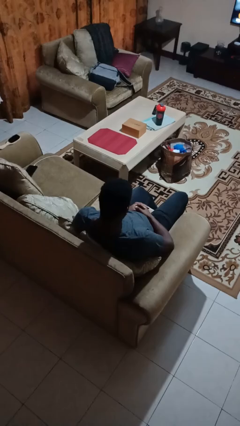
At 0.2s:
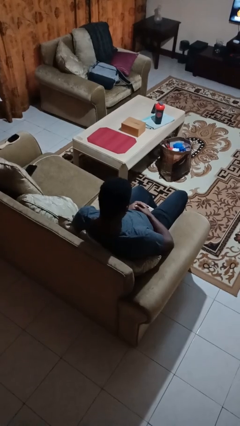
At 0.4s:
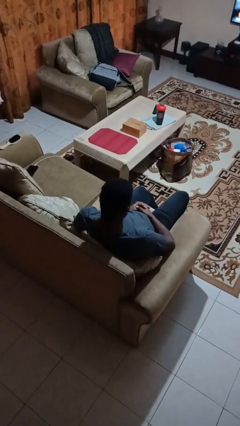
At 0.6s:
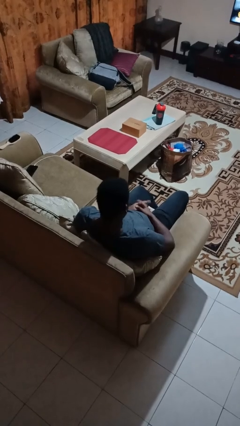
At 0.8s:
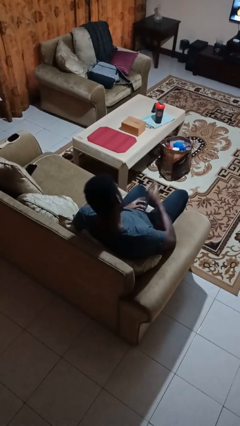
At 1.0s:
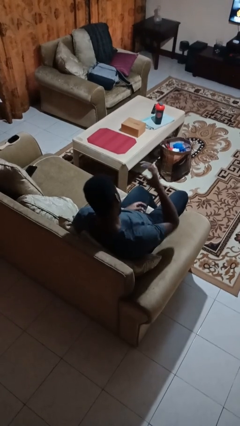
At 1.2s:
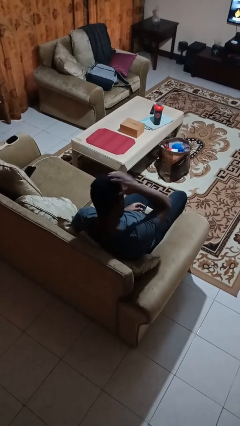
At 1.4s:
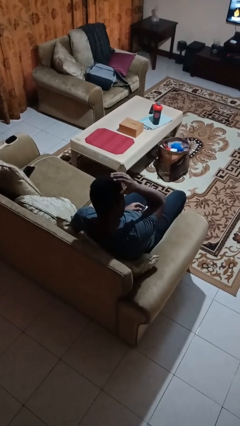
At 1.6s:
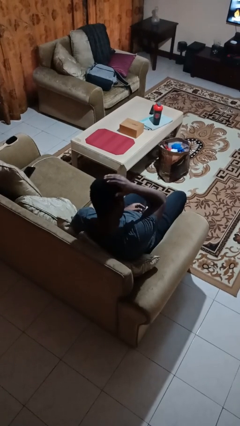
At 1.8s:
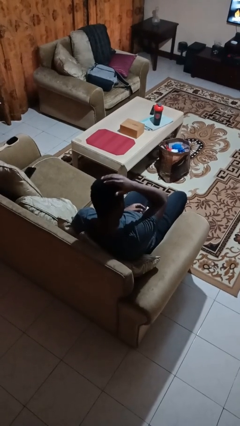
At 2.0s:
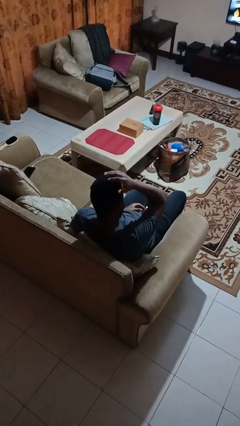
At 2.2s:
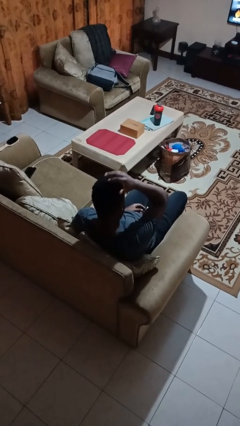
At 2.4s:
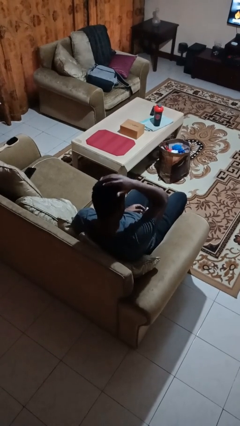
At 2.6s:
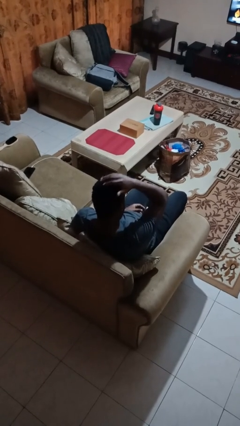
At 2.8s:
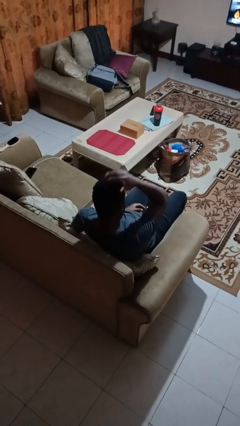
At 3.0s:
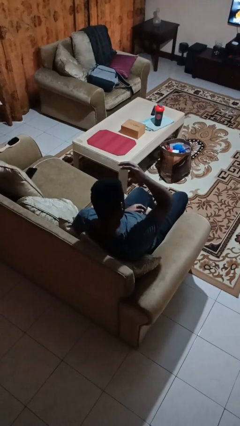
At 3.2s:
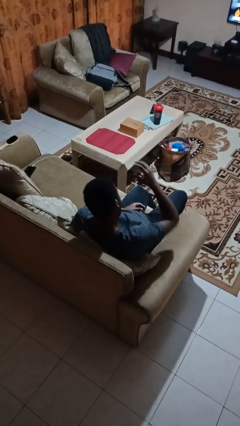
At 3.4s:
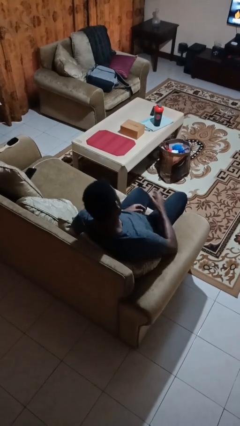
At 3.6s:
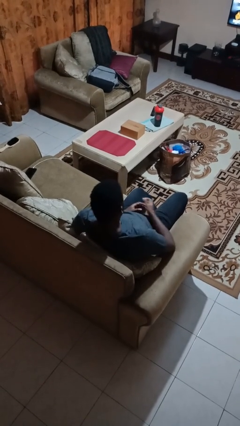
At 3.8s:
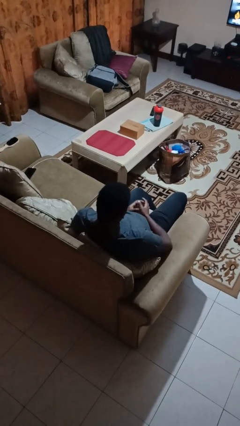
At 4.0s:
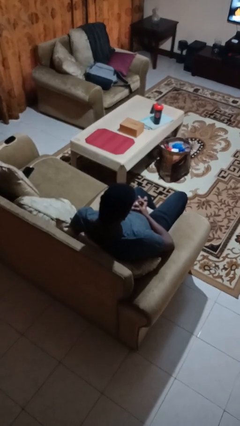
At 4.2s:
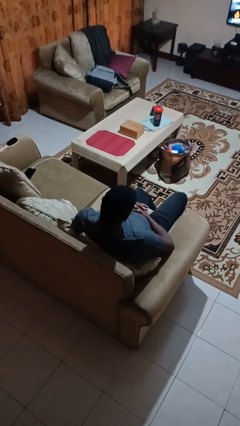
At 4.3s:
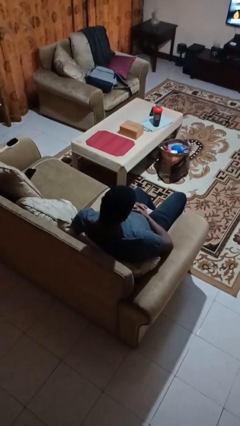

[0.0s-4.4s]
person pats head

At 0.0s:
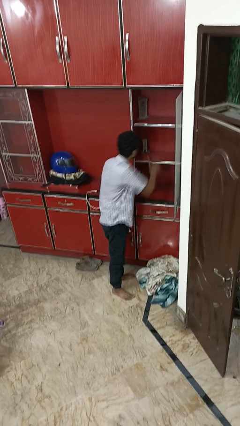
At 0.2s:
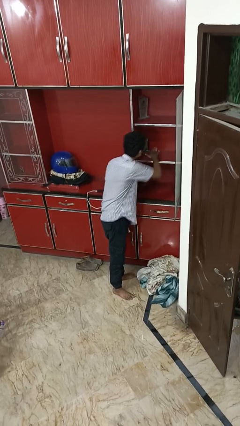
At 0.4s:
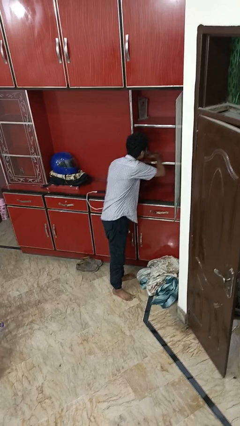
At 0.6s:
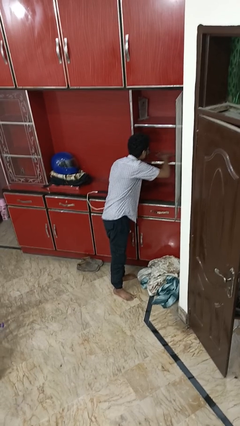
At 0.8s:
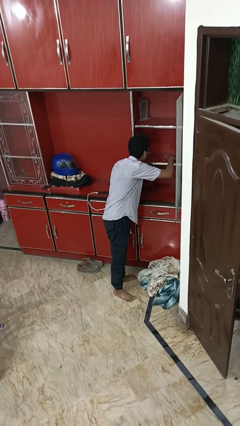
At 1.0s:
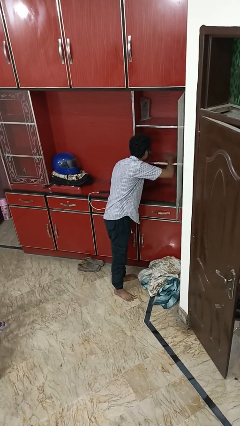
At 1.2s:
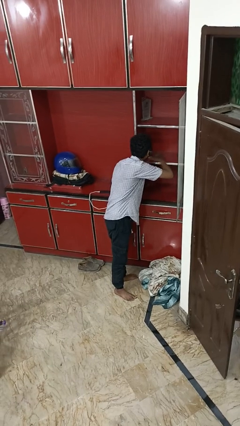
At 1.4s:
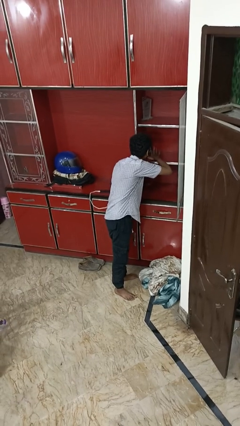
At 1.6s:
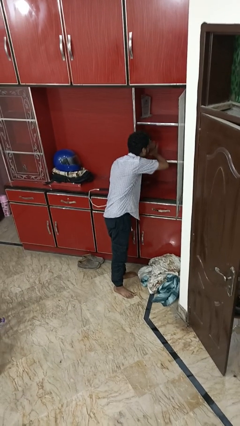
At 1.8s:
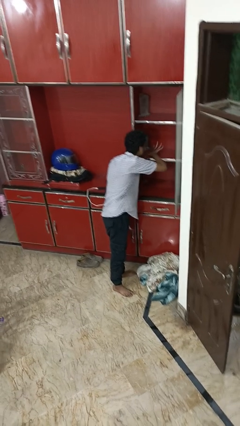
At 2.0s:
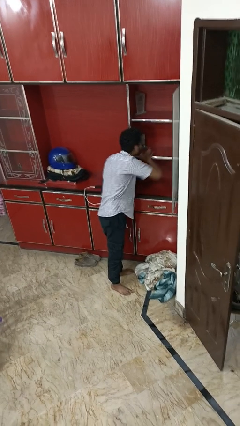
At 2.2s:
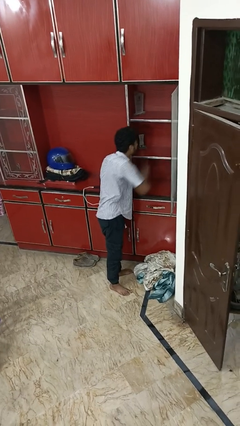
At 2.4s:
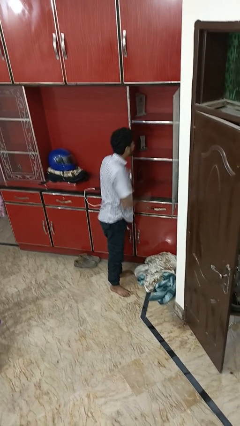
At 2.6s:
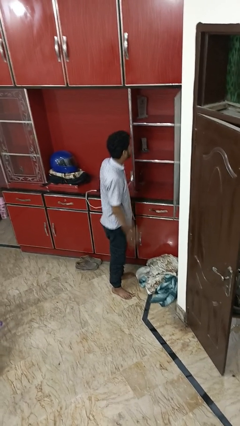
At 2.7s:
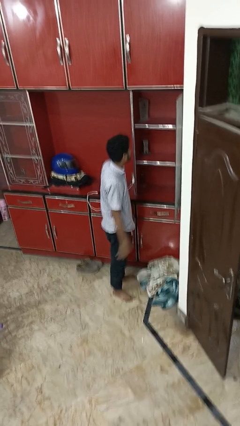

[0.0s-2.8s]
person searches in cabinet

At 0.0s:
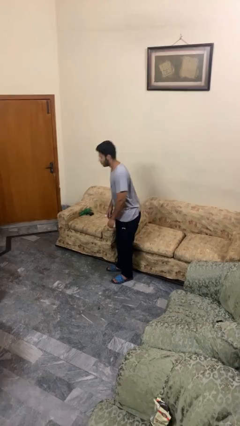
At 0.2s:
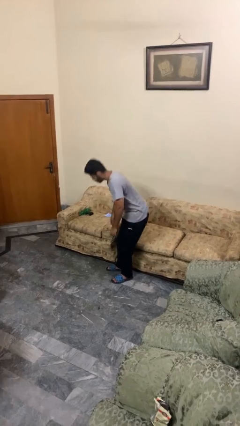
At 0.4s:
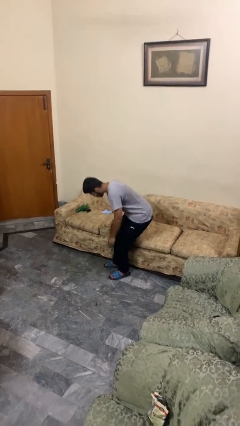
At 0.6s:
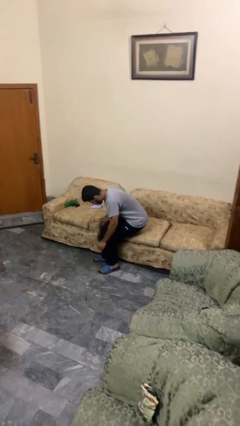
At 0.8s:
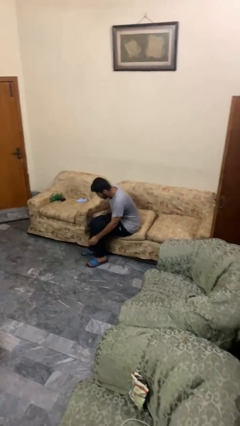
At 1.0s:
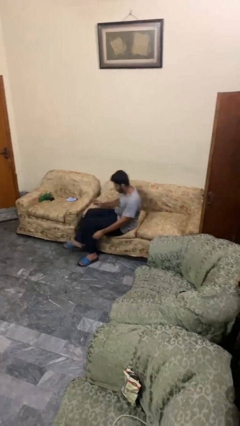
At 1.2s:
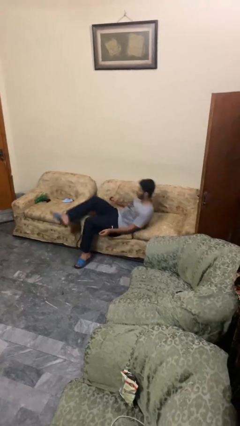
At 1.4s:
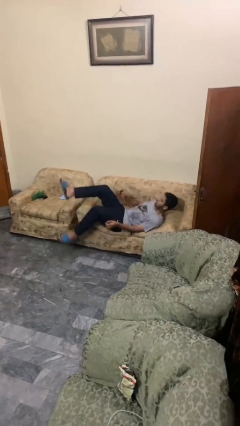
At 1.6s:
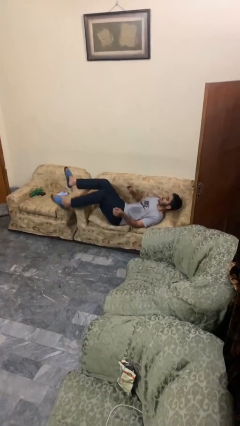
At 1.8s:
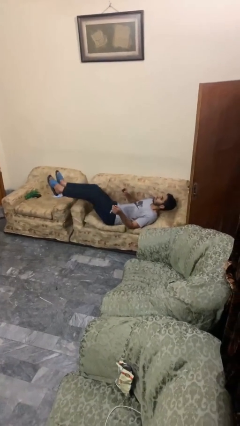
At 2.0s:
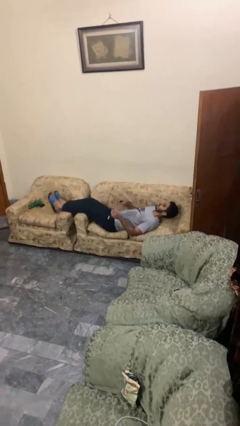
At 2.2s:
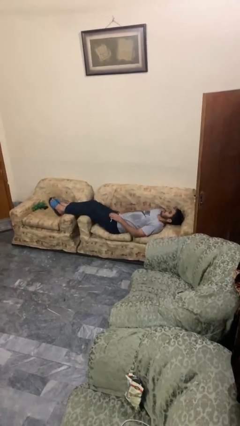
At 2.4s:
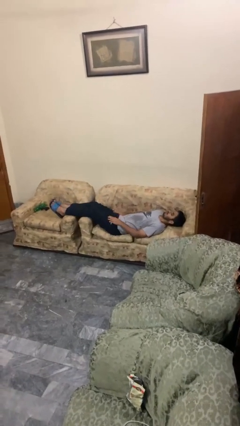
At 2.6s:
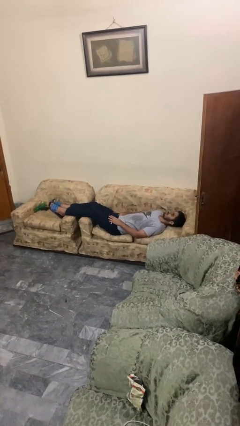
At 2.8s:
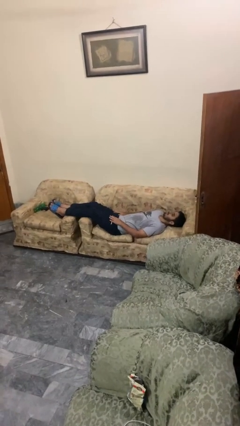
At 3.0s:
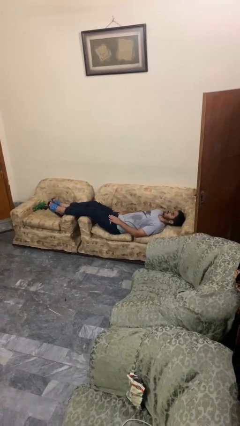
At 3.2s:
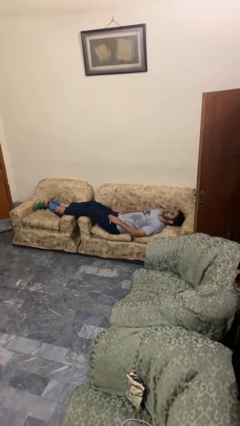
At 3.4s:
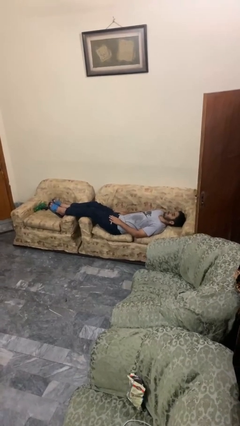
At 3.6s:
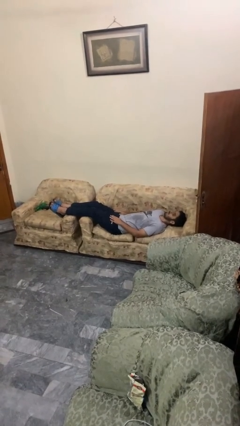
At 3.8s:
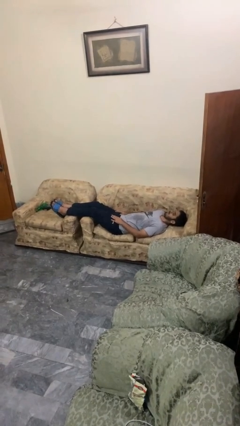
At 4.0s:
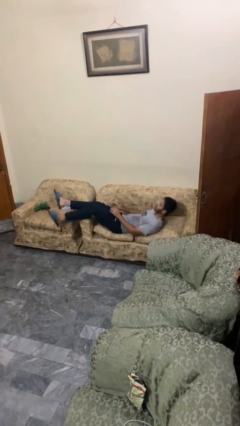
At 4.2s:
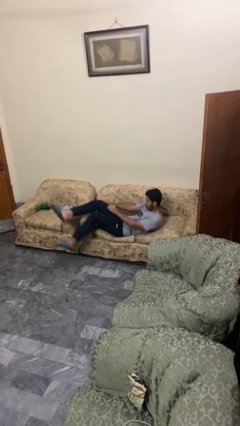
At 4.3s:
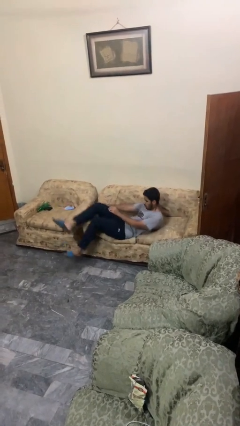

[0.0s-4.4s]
person lies down on couch

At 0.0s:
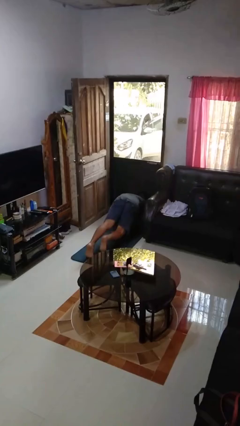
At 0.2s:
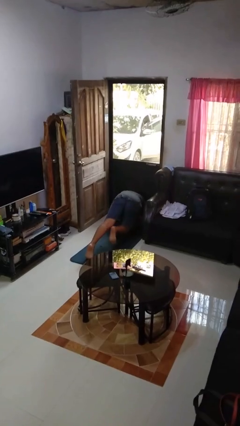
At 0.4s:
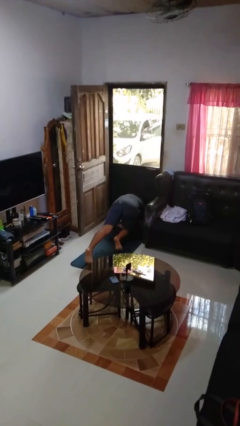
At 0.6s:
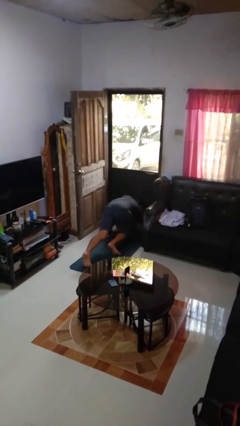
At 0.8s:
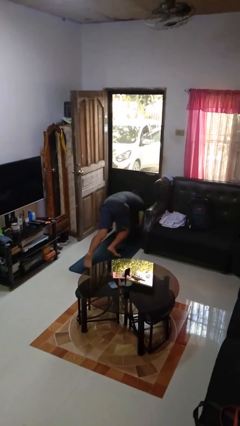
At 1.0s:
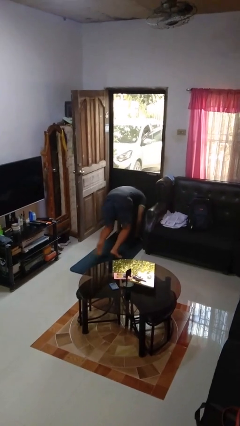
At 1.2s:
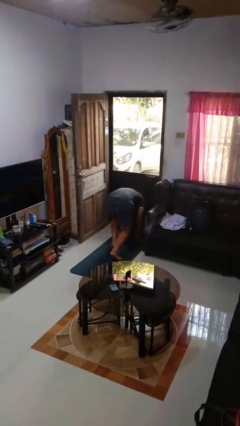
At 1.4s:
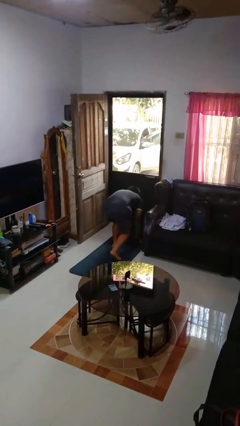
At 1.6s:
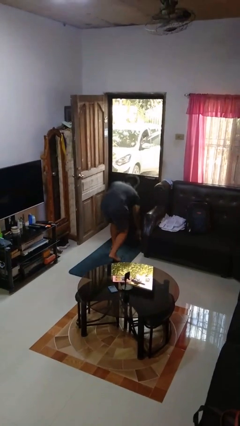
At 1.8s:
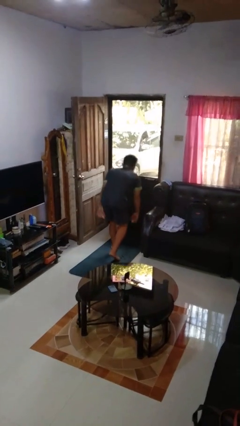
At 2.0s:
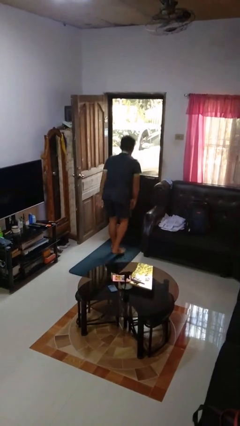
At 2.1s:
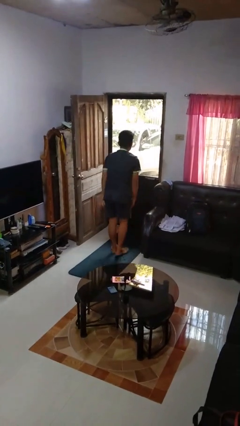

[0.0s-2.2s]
person stands up from floor

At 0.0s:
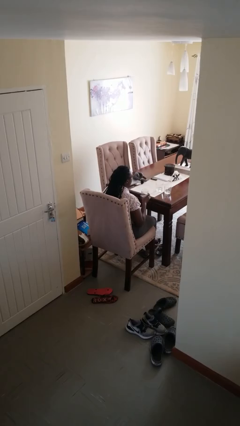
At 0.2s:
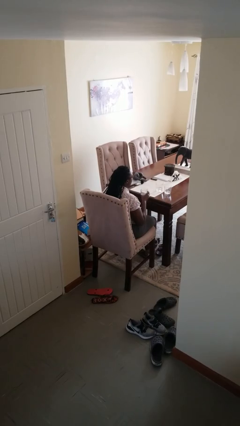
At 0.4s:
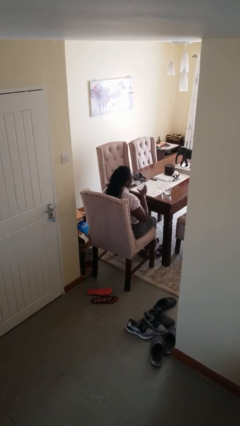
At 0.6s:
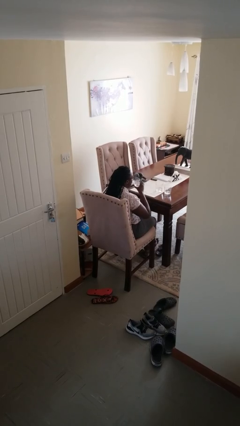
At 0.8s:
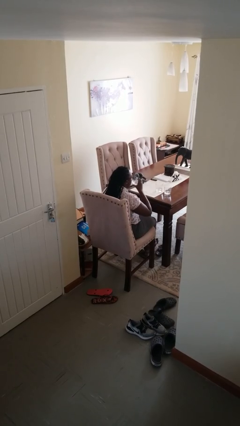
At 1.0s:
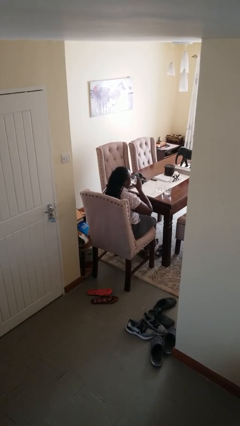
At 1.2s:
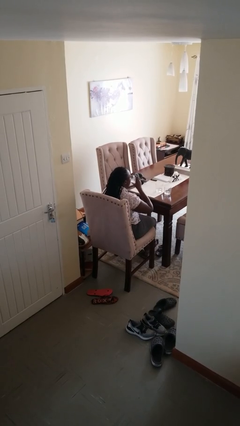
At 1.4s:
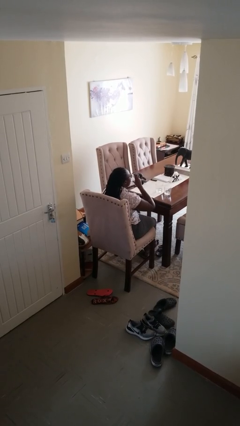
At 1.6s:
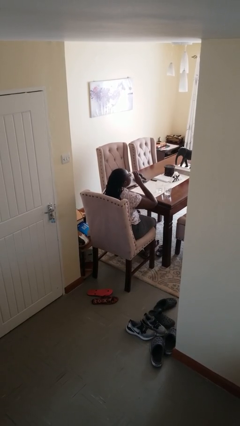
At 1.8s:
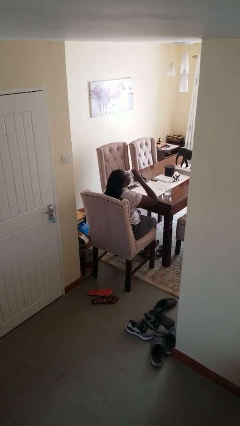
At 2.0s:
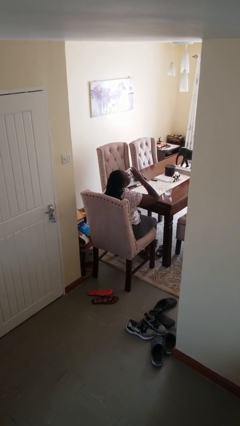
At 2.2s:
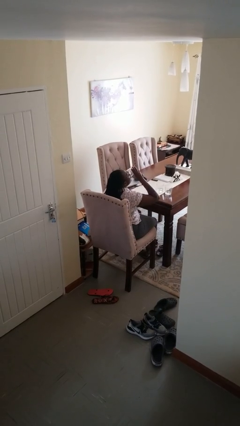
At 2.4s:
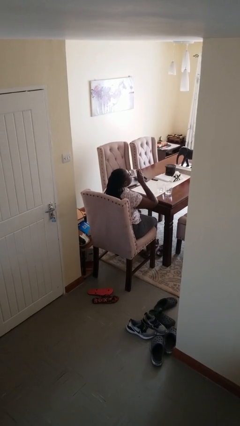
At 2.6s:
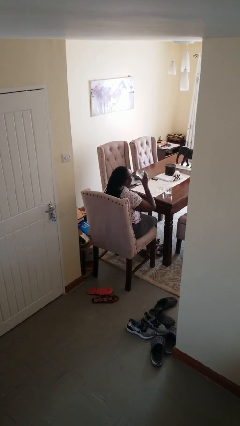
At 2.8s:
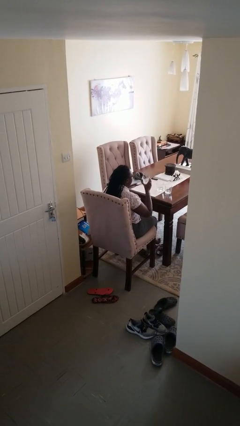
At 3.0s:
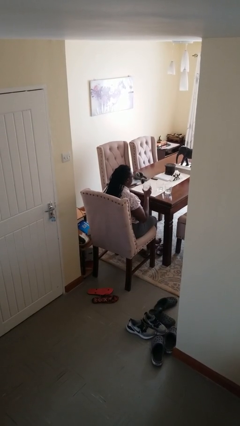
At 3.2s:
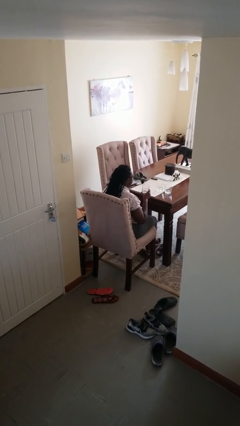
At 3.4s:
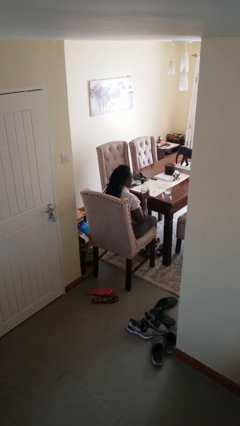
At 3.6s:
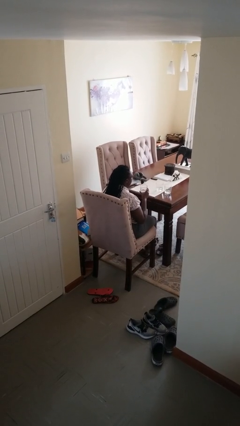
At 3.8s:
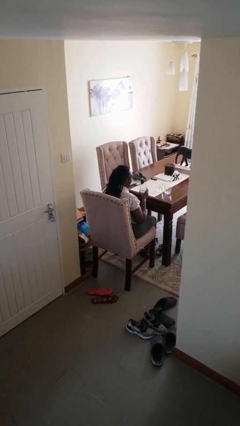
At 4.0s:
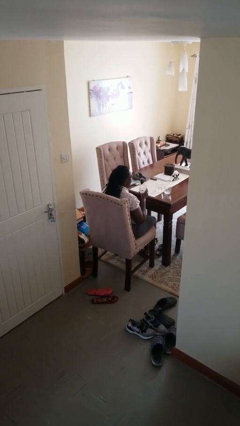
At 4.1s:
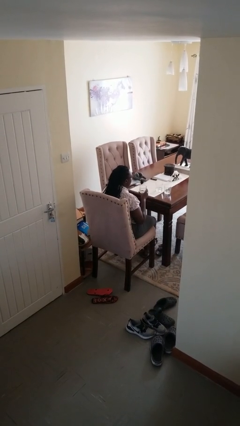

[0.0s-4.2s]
person drinks from shotglass
